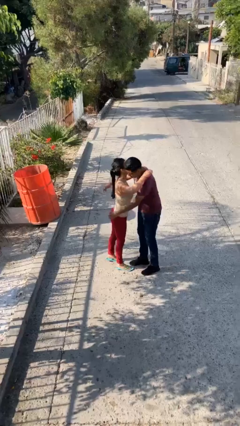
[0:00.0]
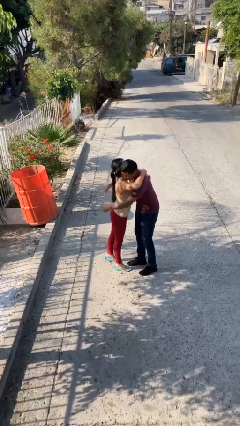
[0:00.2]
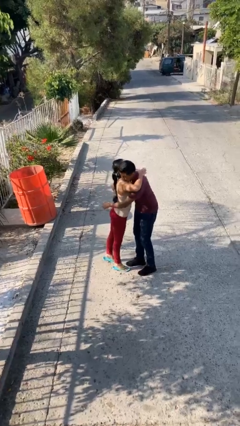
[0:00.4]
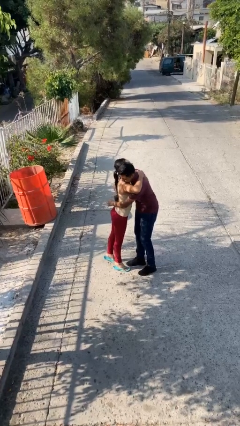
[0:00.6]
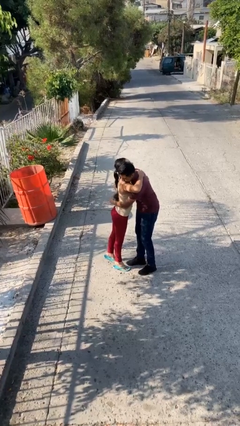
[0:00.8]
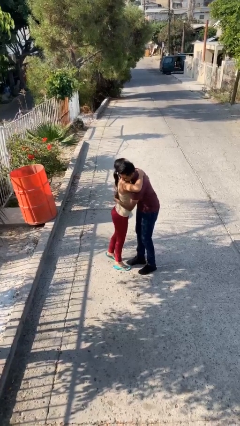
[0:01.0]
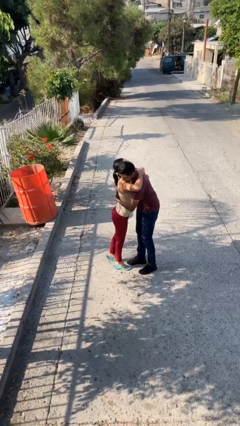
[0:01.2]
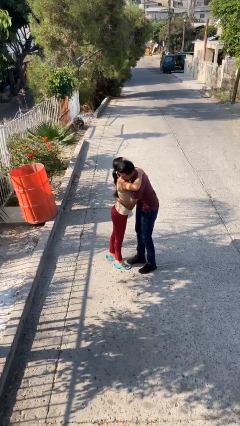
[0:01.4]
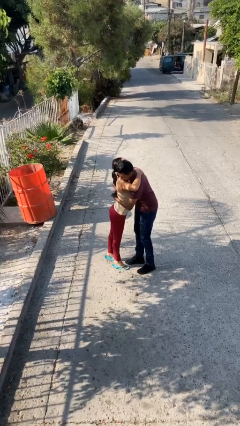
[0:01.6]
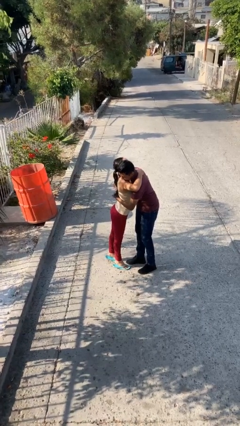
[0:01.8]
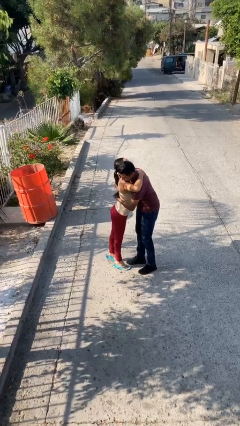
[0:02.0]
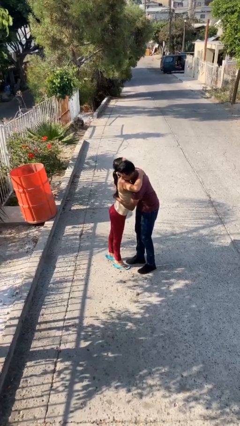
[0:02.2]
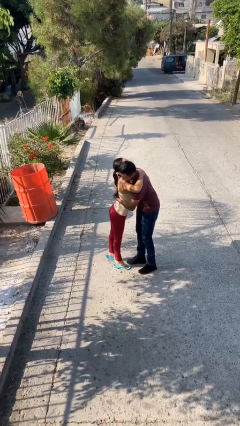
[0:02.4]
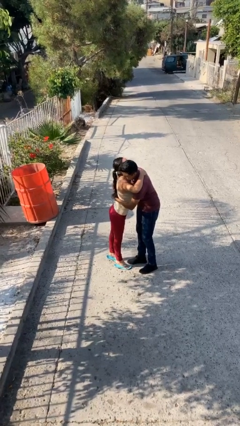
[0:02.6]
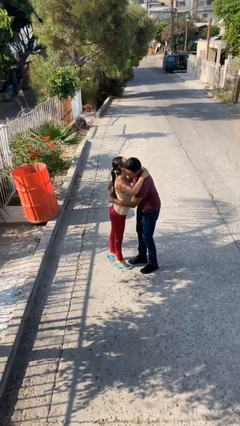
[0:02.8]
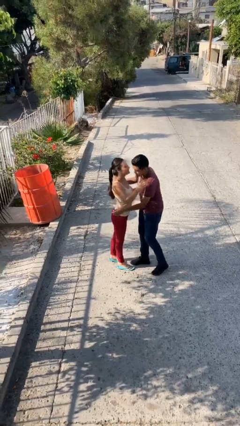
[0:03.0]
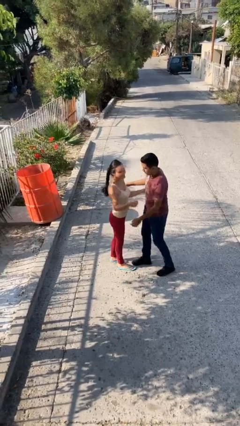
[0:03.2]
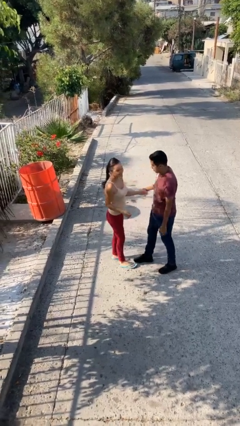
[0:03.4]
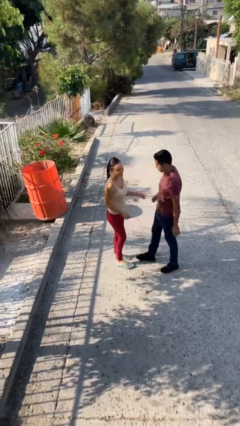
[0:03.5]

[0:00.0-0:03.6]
person embraces person

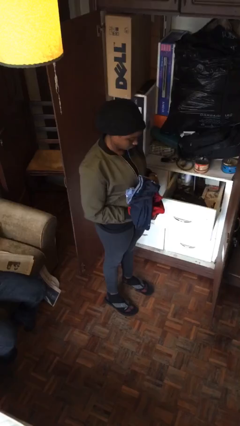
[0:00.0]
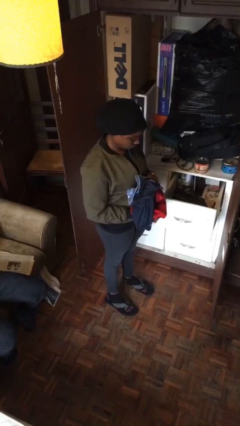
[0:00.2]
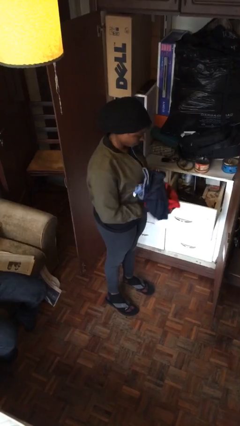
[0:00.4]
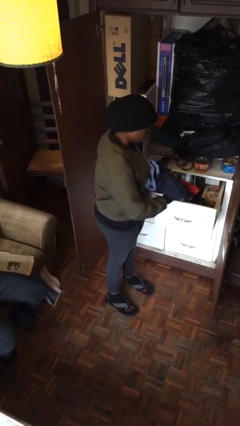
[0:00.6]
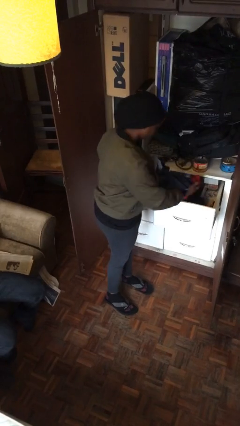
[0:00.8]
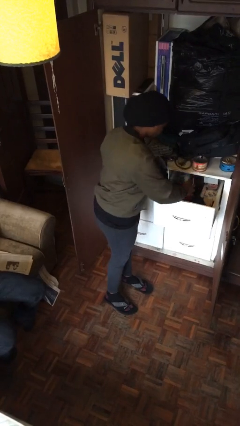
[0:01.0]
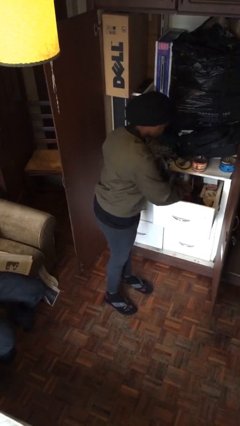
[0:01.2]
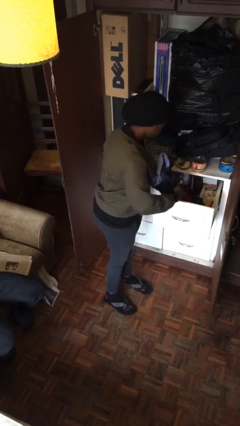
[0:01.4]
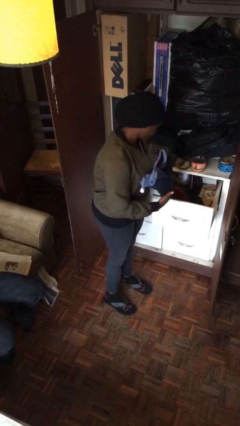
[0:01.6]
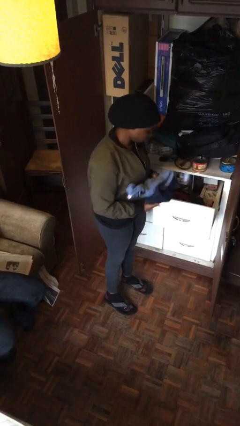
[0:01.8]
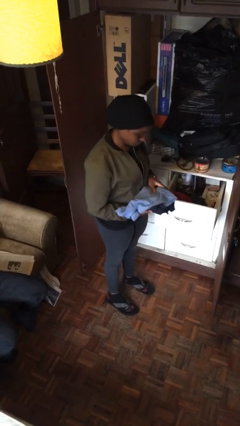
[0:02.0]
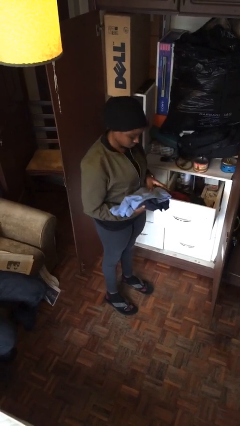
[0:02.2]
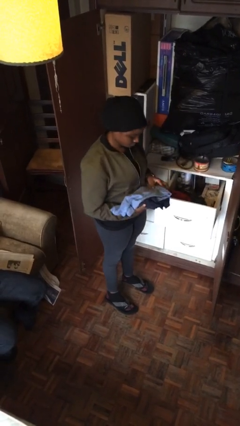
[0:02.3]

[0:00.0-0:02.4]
person puts clothes into dresser

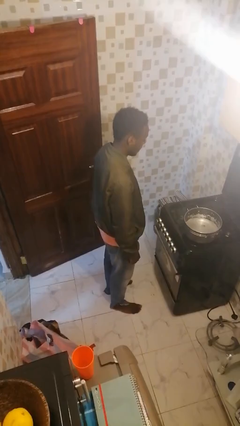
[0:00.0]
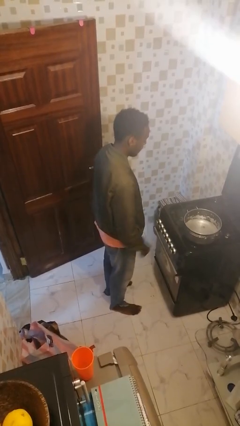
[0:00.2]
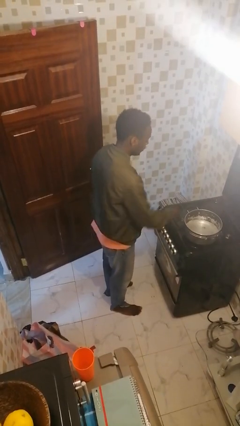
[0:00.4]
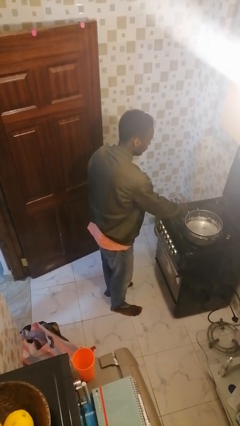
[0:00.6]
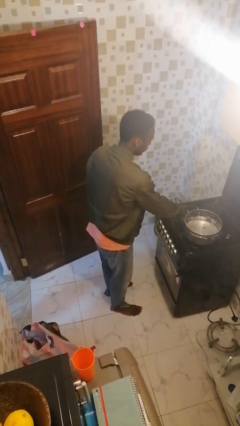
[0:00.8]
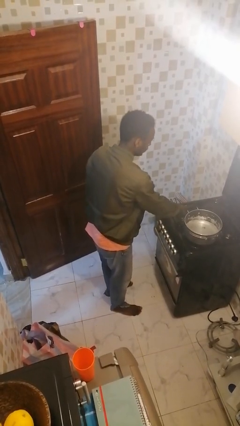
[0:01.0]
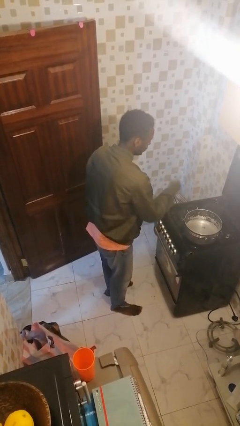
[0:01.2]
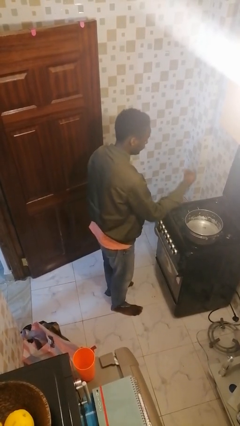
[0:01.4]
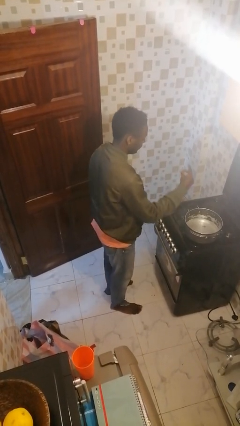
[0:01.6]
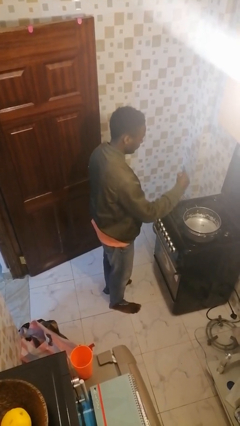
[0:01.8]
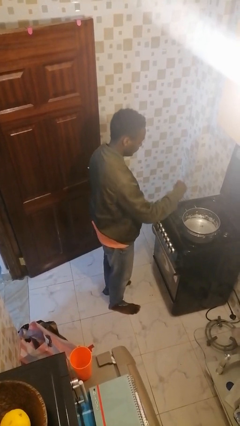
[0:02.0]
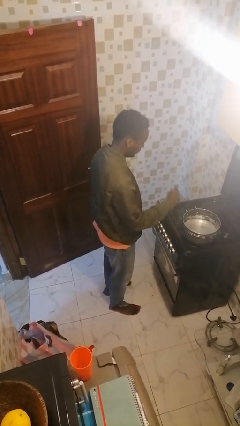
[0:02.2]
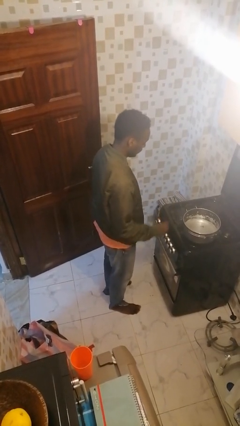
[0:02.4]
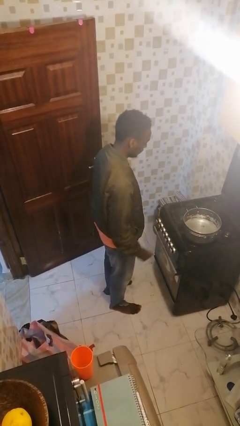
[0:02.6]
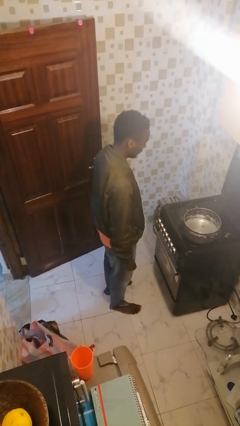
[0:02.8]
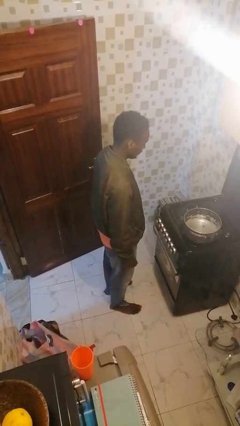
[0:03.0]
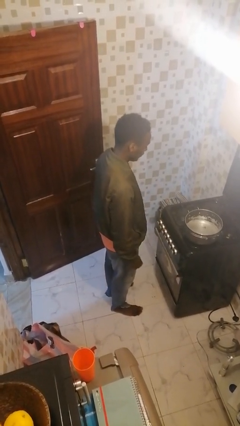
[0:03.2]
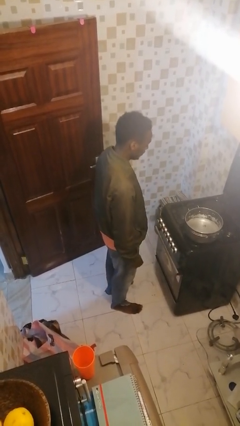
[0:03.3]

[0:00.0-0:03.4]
person burns hand

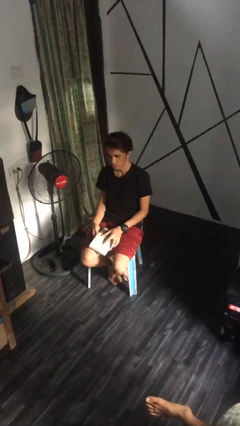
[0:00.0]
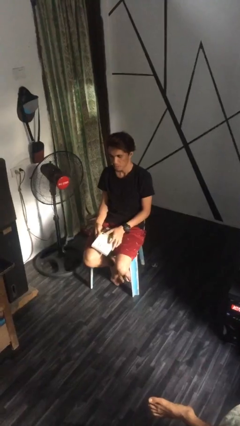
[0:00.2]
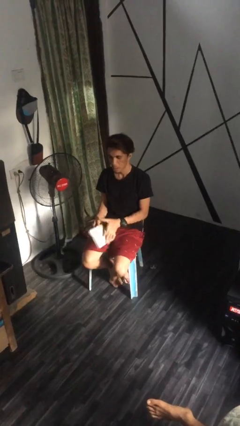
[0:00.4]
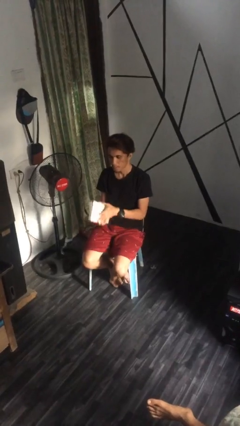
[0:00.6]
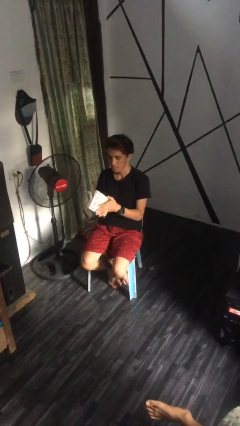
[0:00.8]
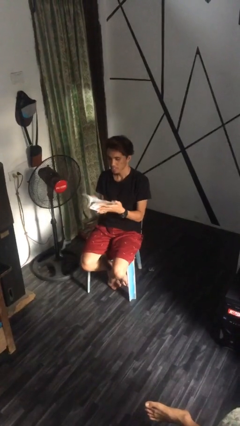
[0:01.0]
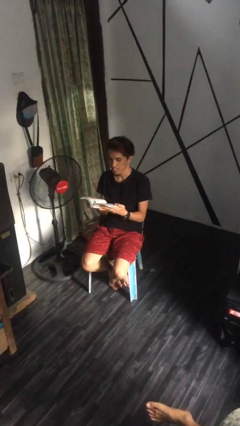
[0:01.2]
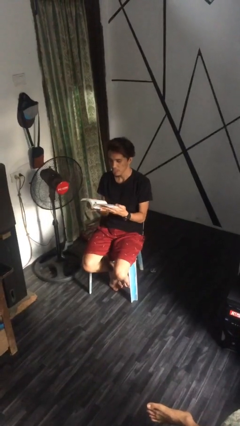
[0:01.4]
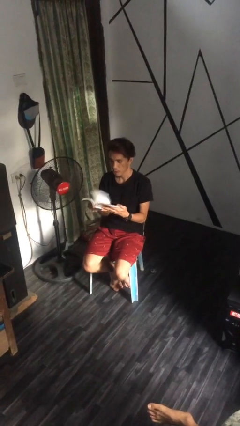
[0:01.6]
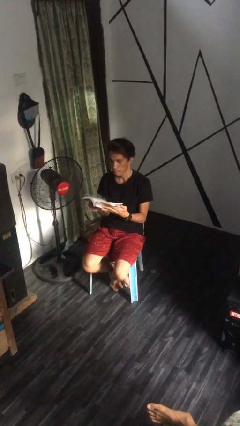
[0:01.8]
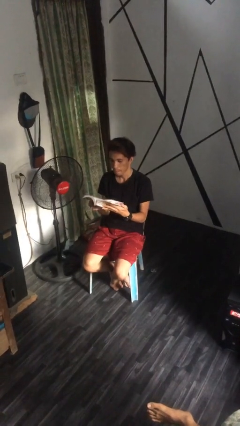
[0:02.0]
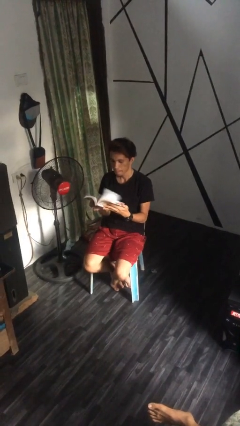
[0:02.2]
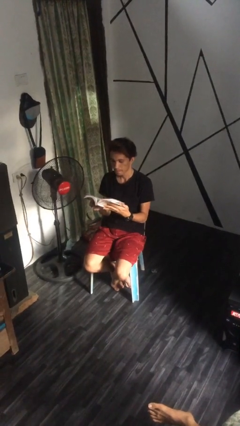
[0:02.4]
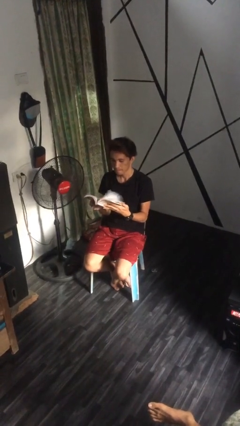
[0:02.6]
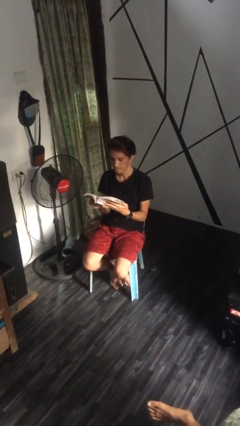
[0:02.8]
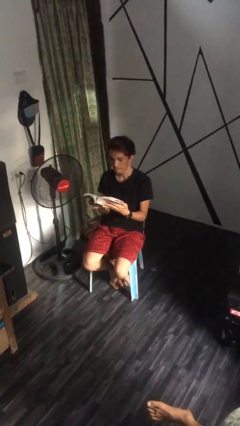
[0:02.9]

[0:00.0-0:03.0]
person reads document

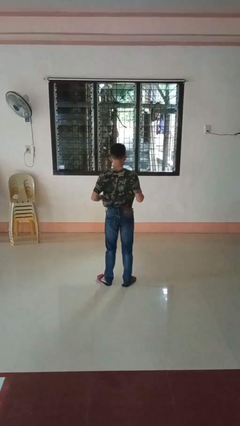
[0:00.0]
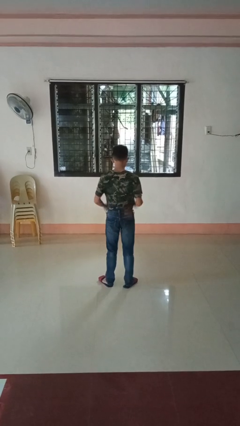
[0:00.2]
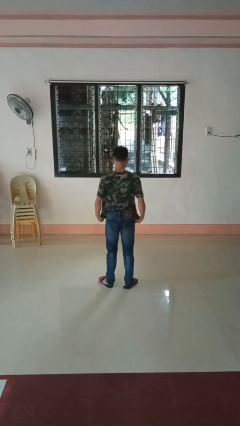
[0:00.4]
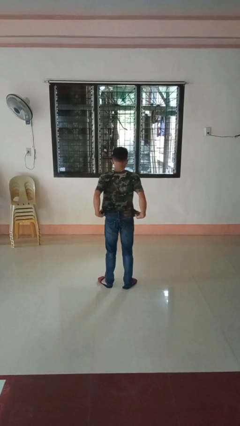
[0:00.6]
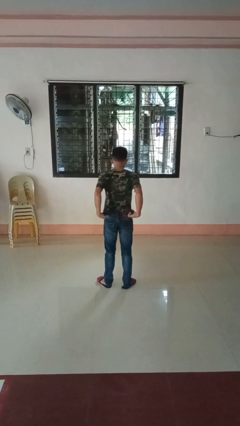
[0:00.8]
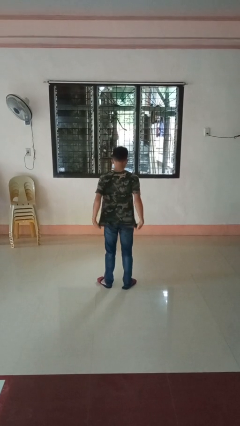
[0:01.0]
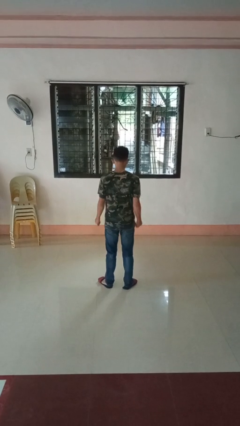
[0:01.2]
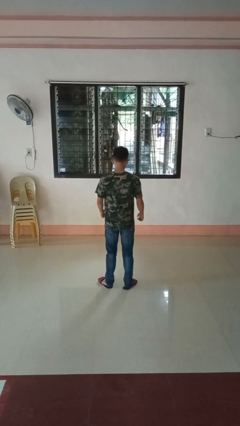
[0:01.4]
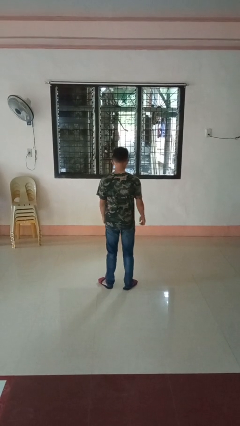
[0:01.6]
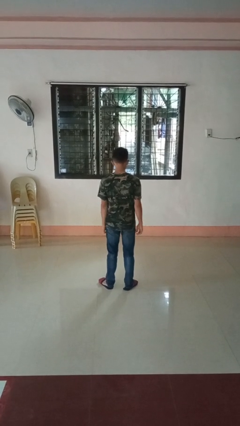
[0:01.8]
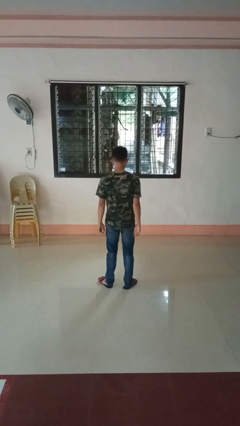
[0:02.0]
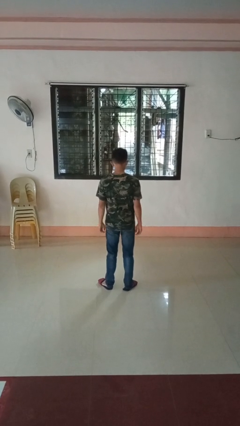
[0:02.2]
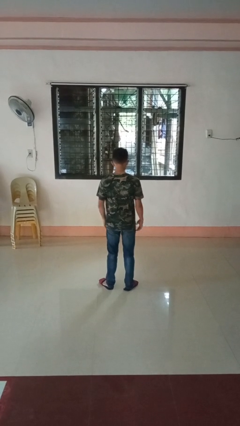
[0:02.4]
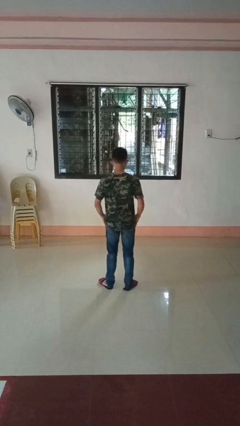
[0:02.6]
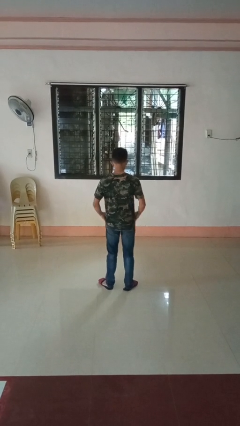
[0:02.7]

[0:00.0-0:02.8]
person untucks shirt

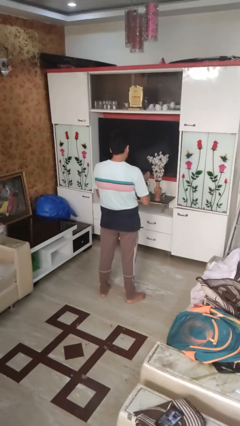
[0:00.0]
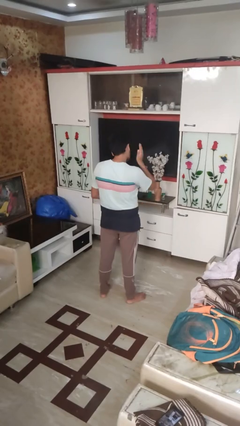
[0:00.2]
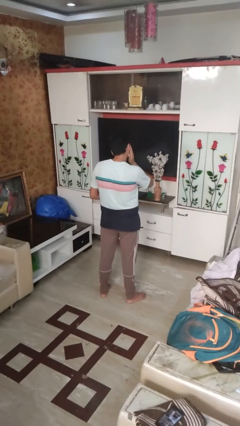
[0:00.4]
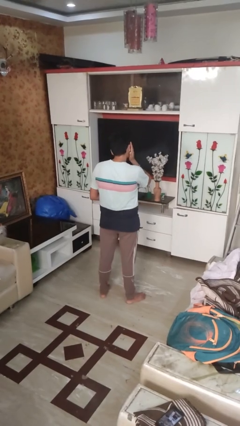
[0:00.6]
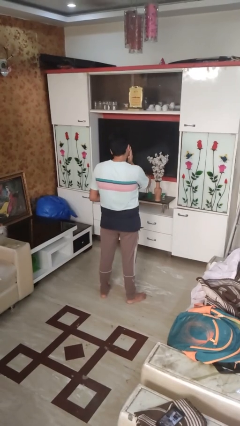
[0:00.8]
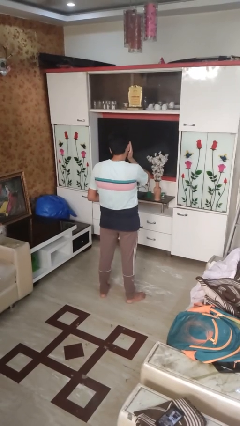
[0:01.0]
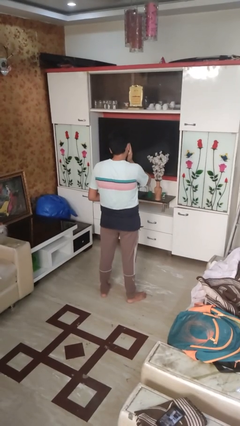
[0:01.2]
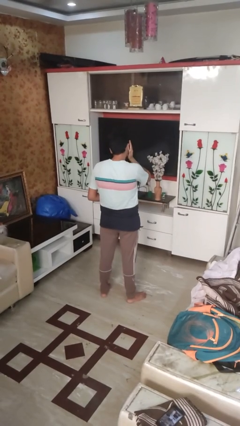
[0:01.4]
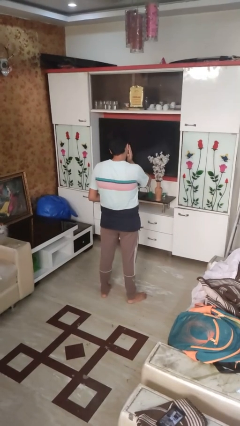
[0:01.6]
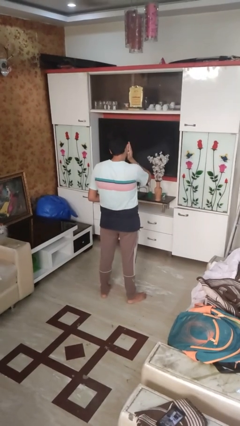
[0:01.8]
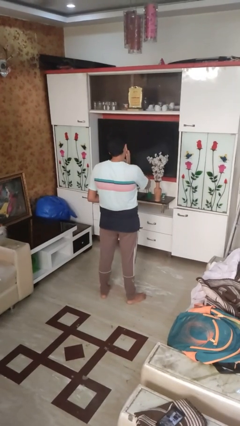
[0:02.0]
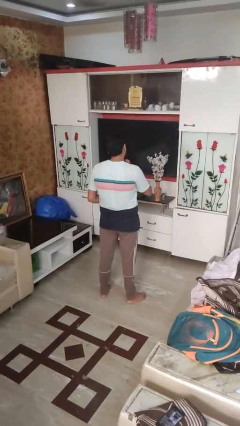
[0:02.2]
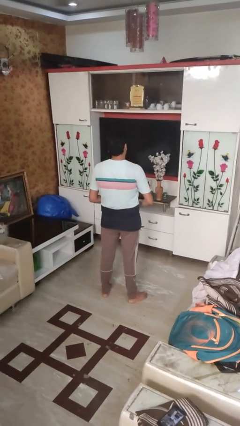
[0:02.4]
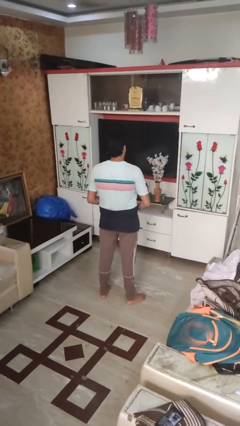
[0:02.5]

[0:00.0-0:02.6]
person applies shaving cream
